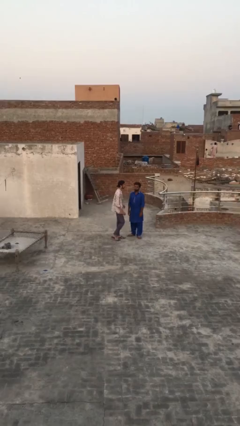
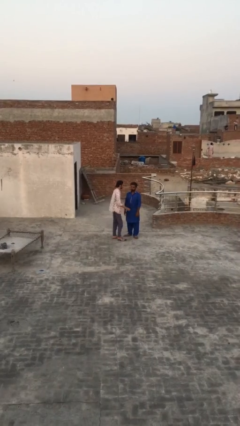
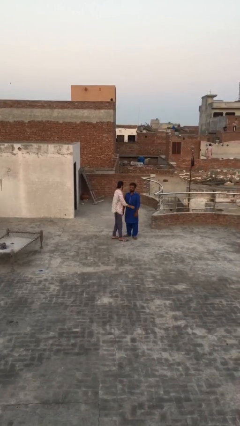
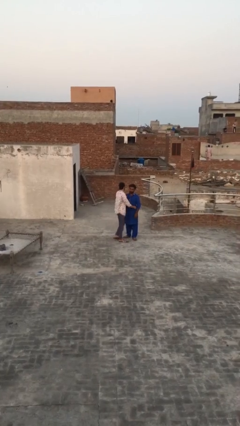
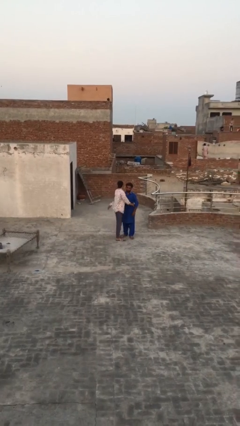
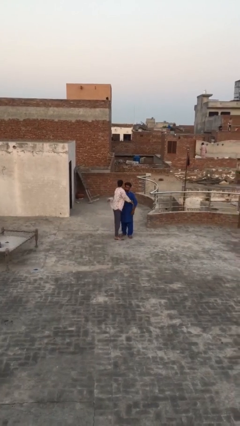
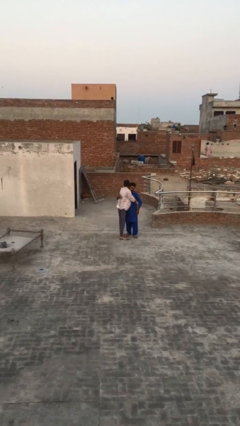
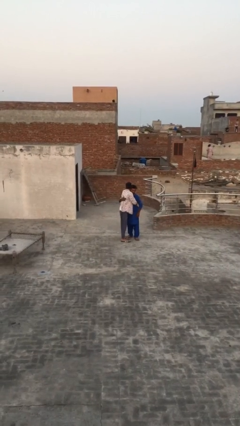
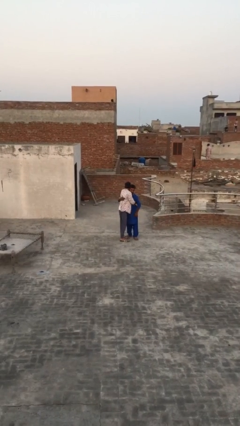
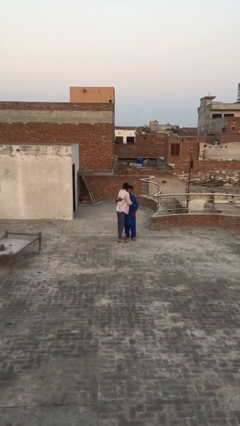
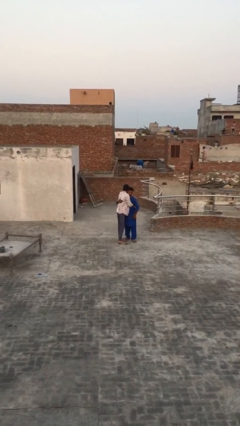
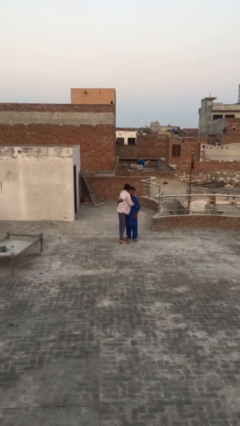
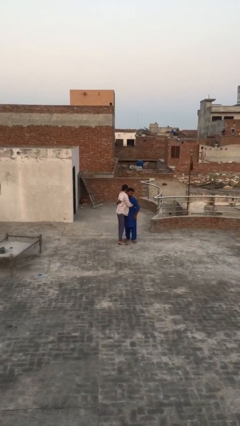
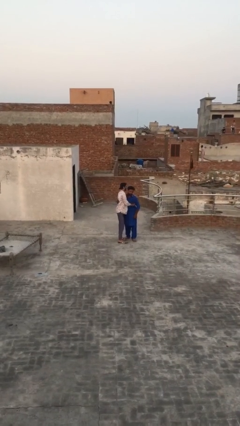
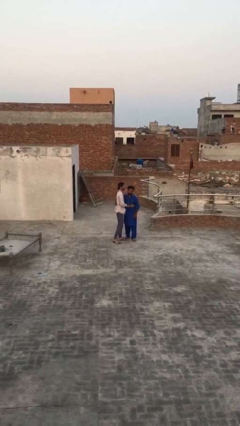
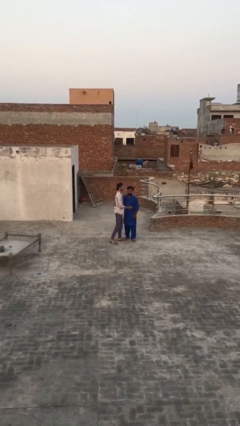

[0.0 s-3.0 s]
person embraces person

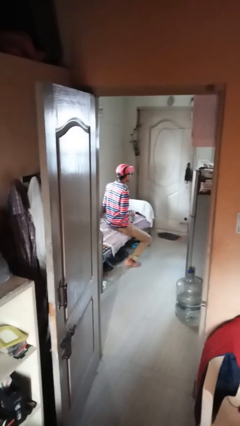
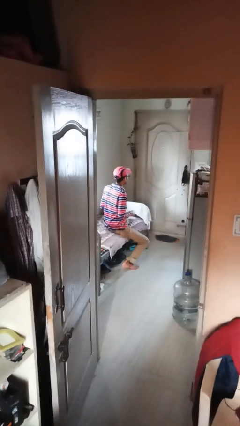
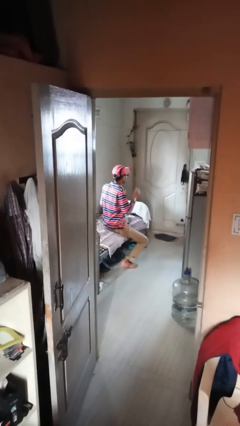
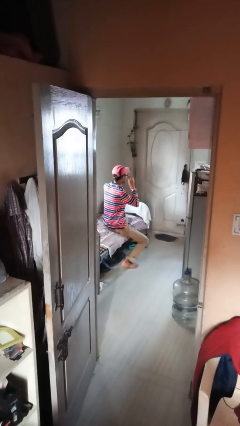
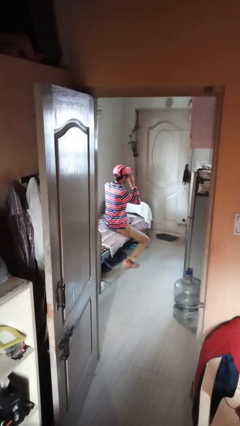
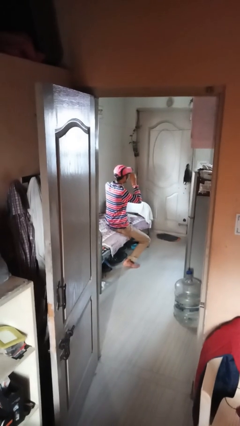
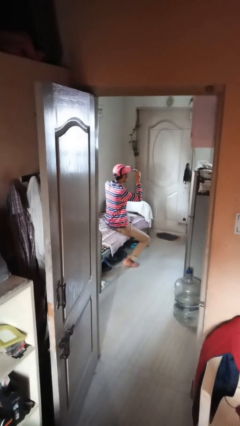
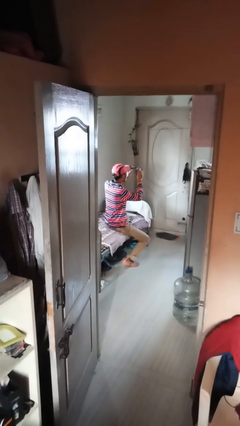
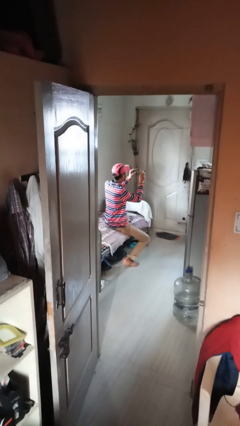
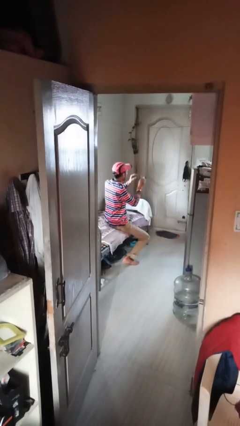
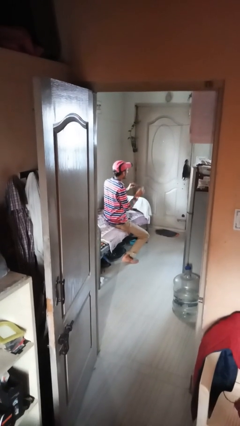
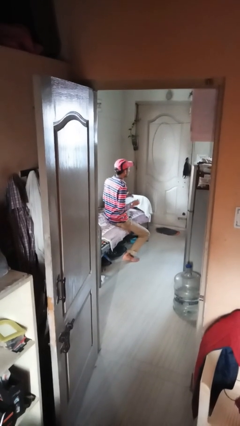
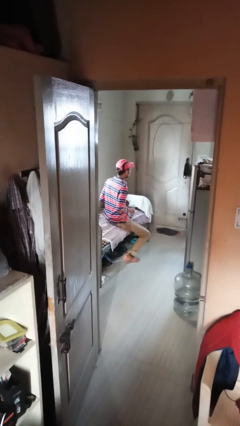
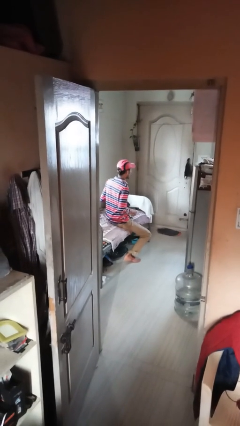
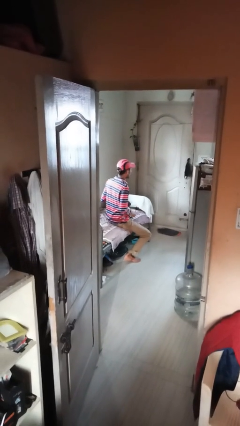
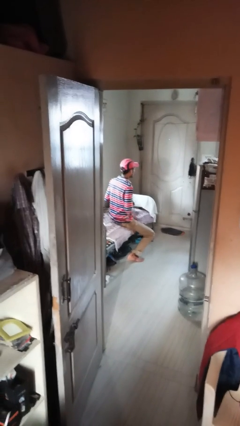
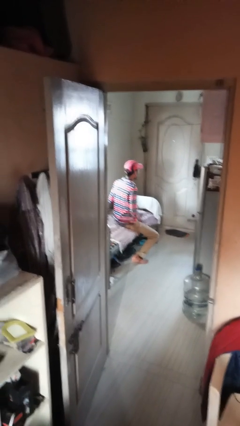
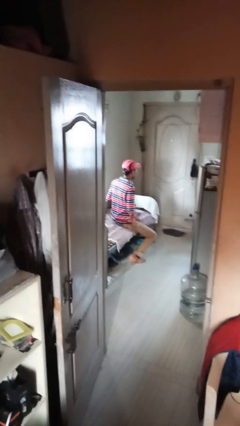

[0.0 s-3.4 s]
person takes off glasses

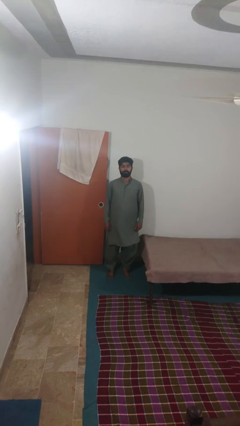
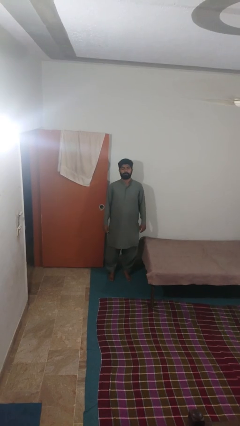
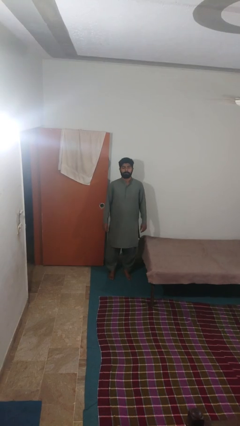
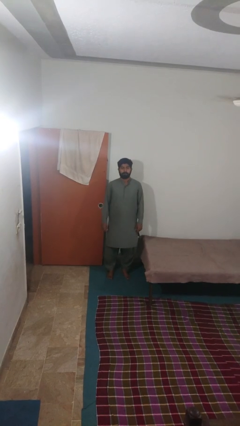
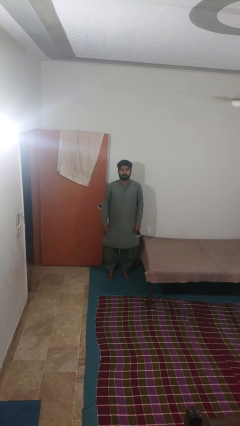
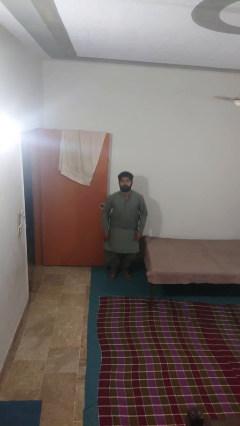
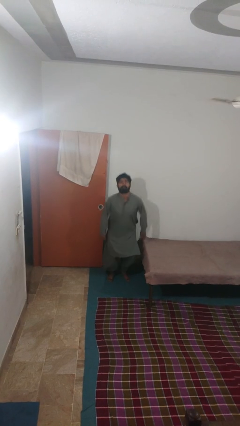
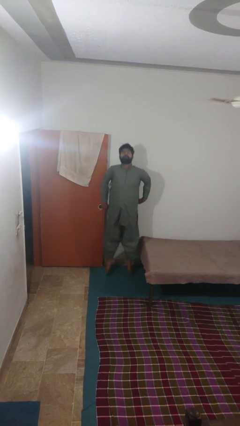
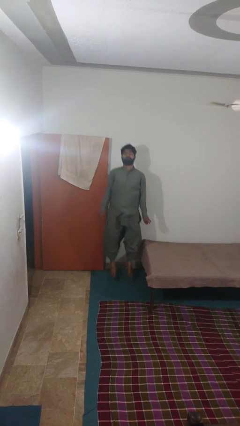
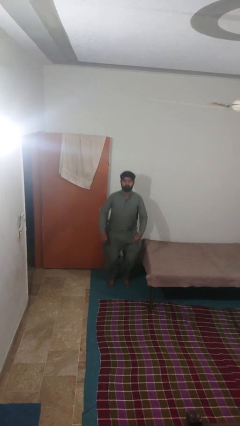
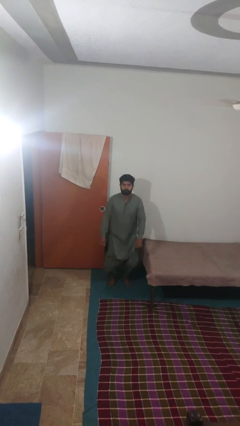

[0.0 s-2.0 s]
person jumps

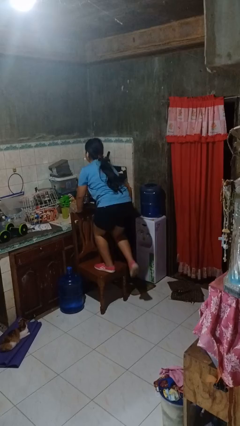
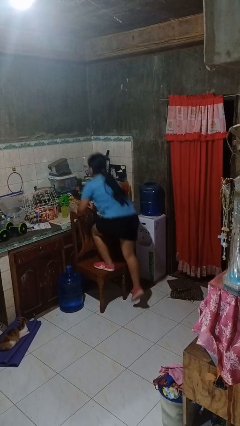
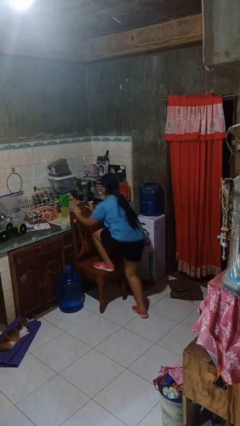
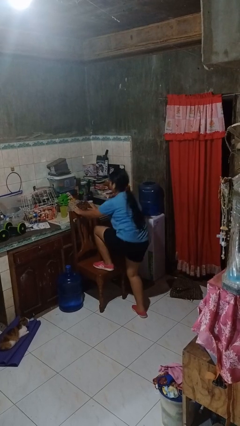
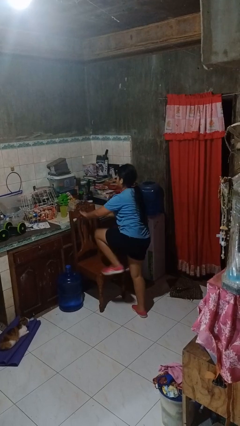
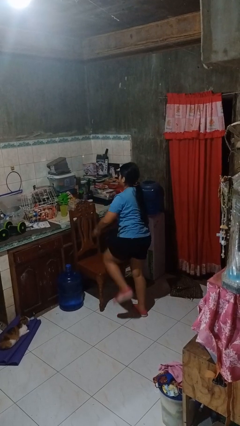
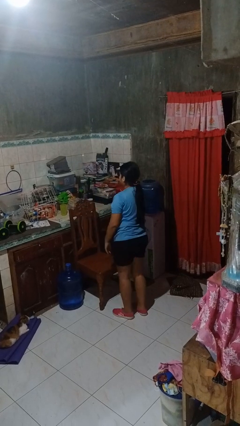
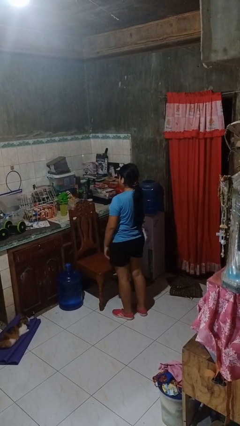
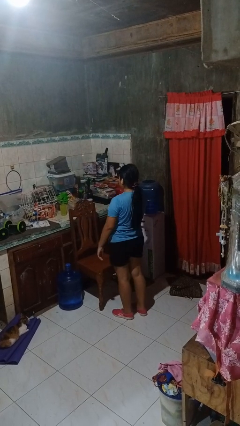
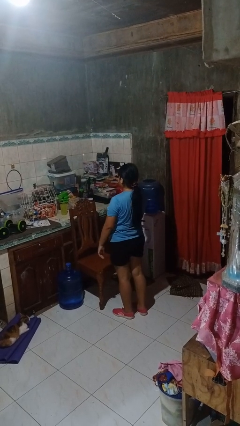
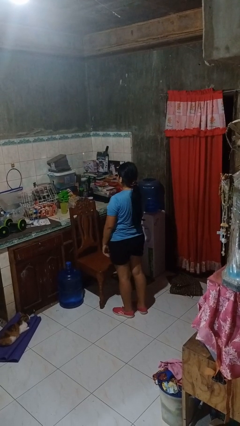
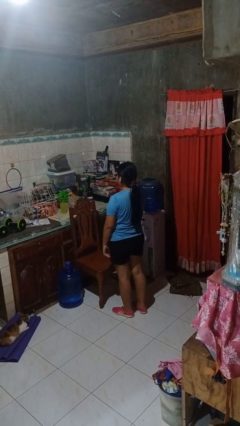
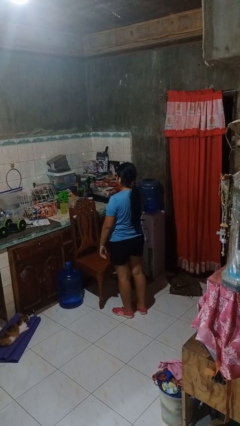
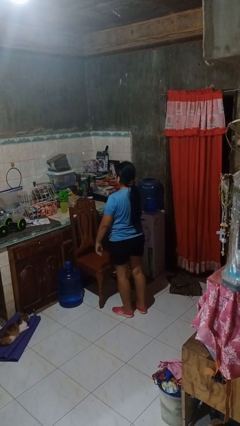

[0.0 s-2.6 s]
person climbs off chair

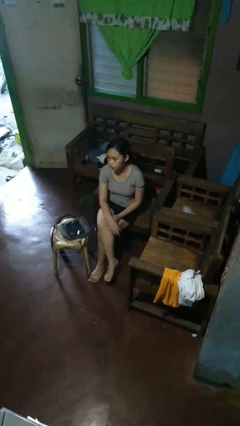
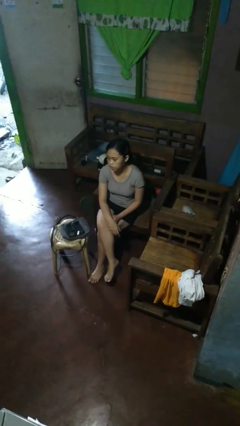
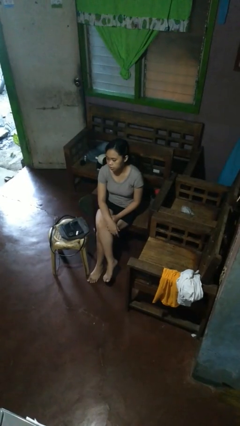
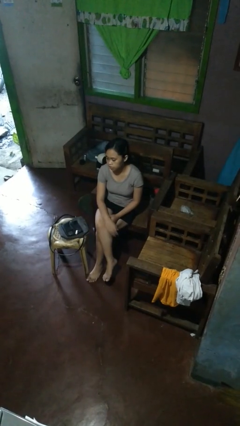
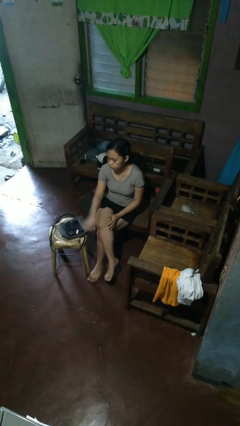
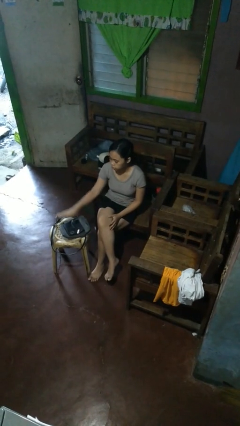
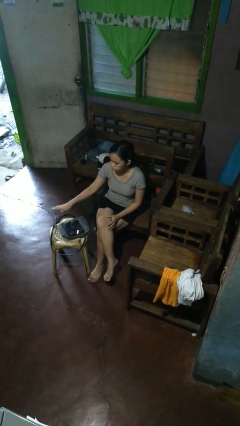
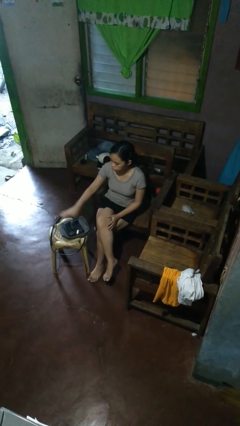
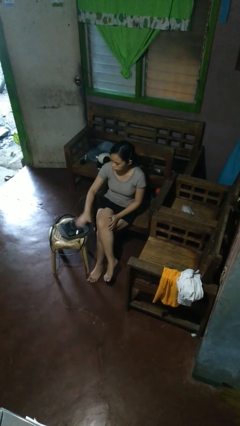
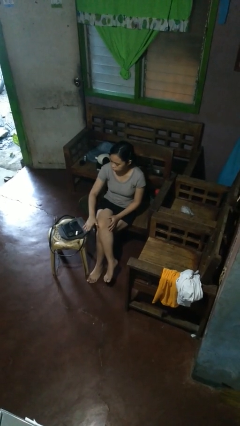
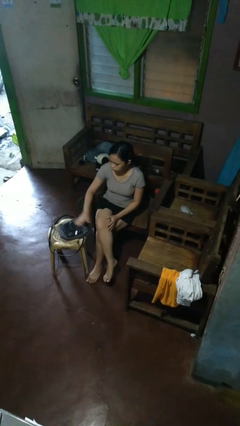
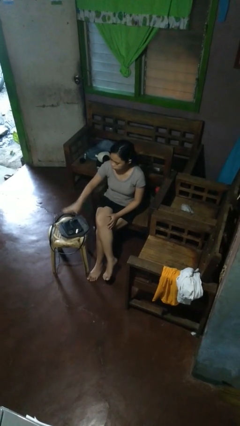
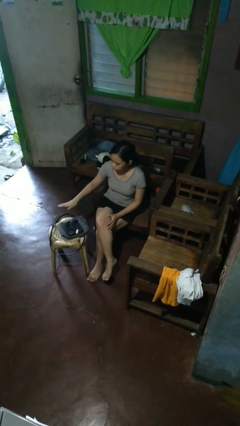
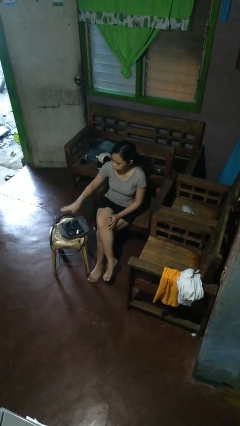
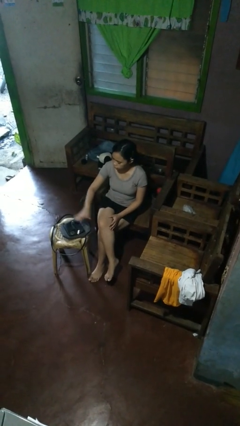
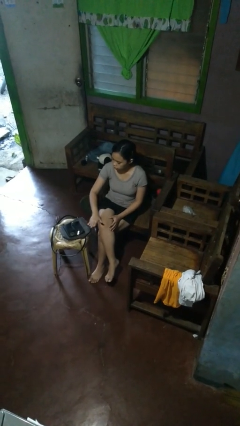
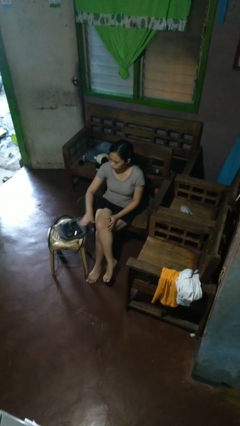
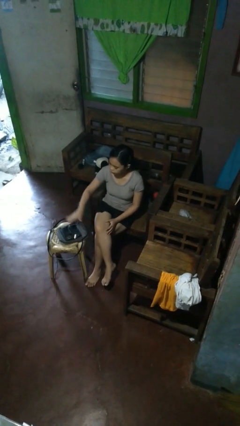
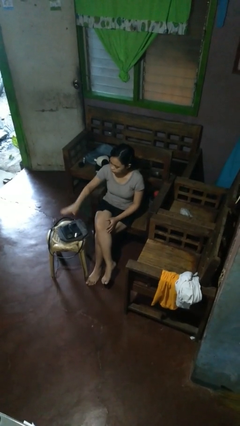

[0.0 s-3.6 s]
person waves hand over object

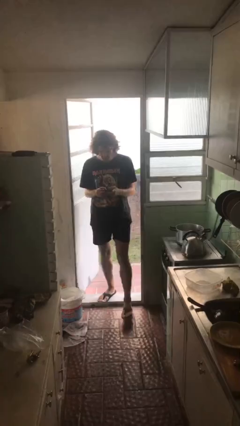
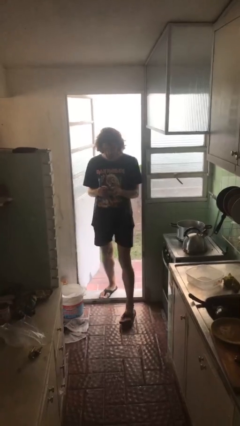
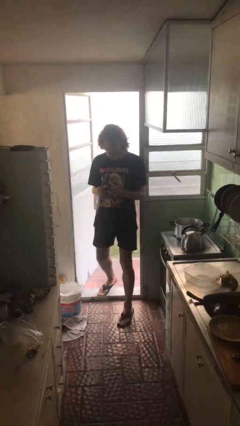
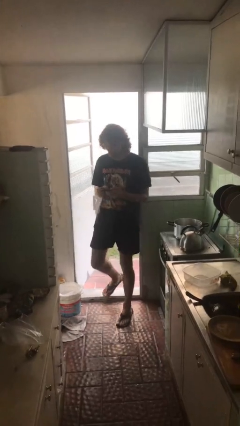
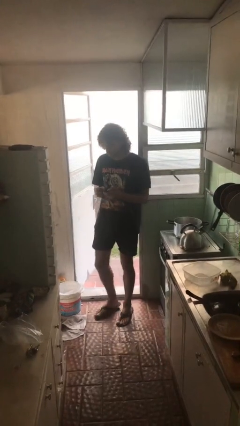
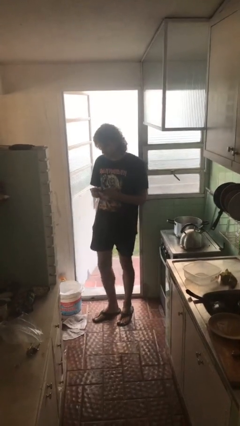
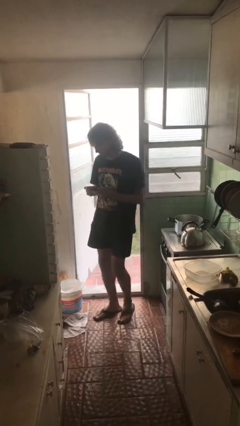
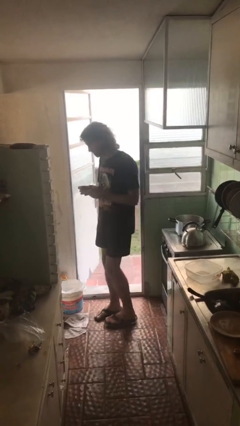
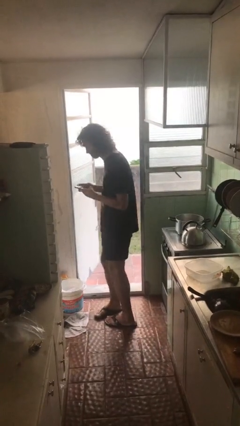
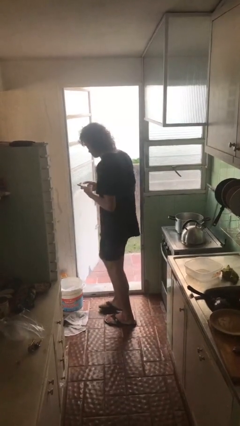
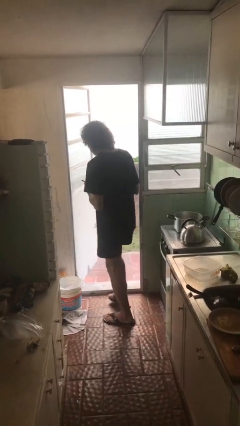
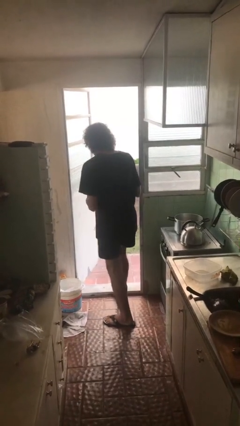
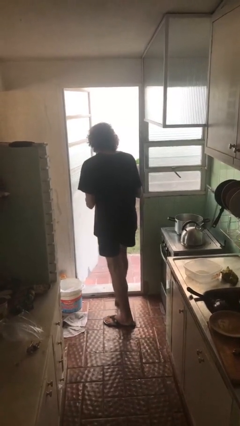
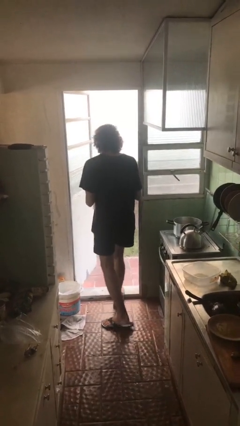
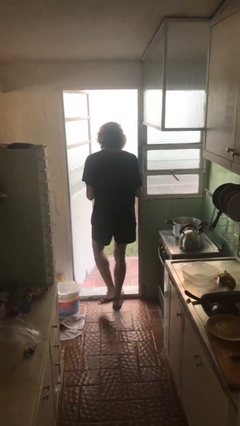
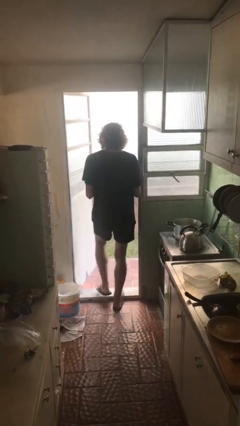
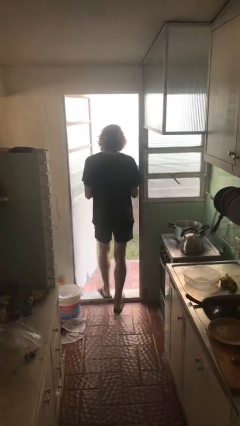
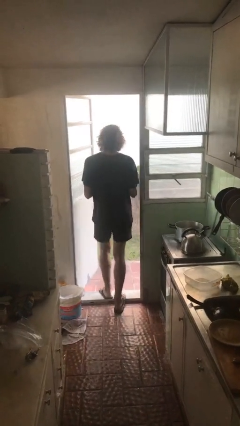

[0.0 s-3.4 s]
person exits scene through structure
